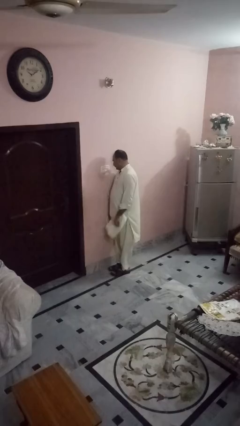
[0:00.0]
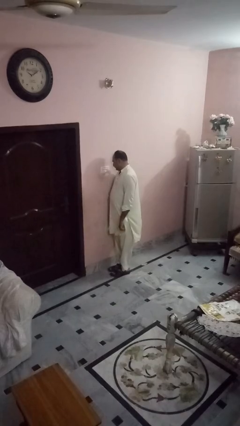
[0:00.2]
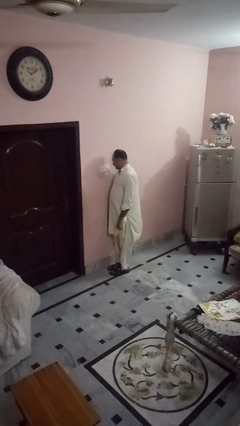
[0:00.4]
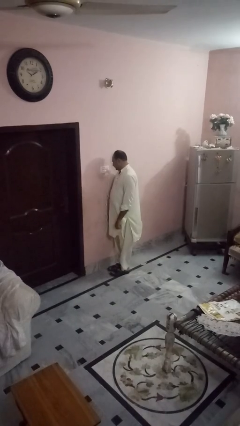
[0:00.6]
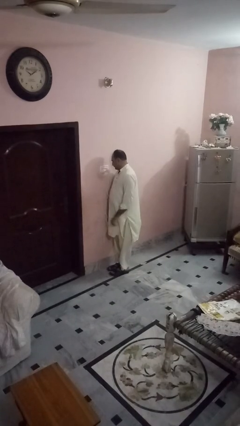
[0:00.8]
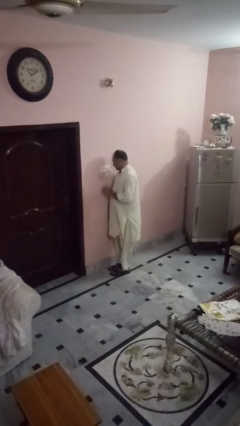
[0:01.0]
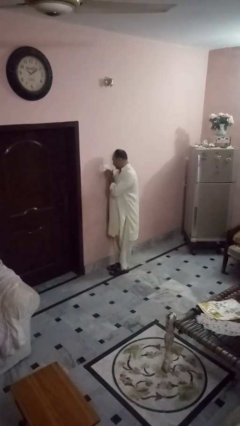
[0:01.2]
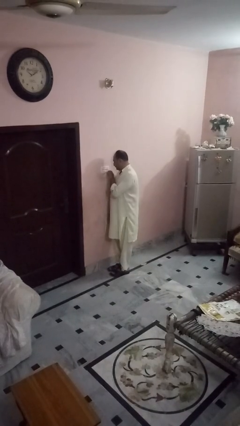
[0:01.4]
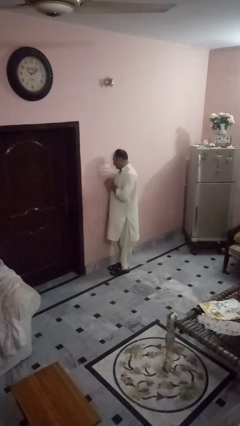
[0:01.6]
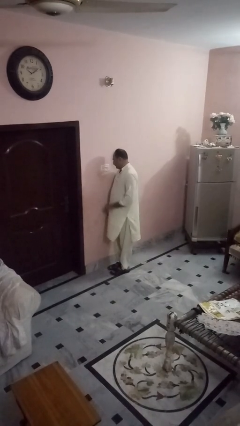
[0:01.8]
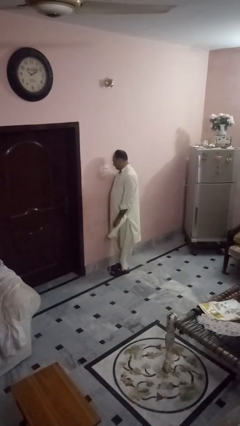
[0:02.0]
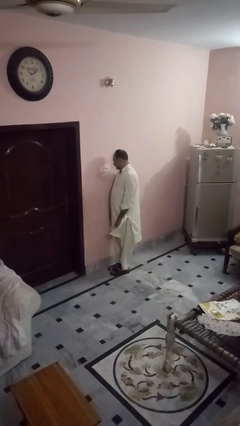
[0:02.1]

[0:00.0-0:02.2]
person unplugs from electrical socket

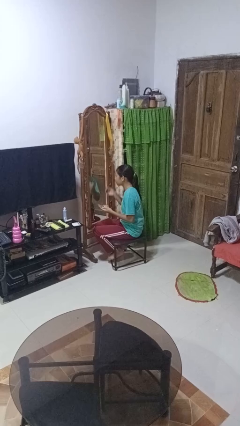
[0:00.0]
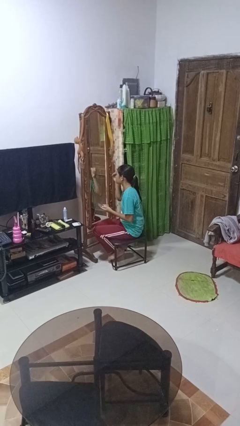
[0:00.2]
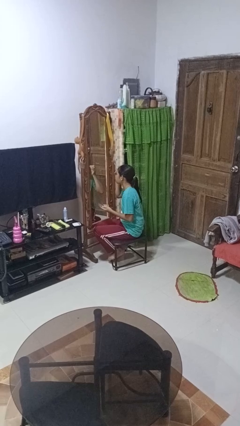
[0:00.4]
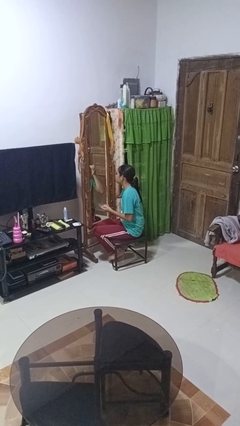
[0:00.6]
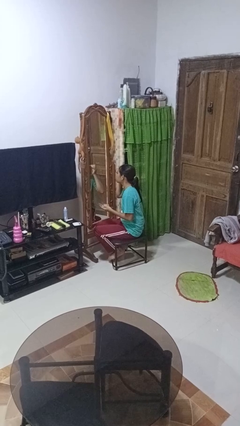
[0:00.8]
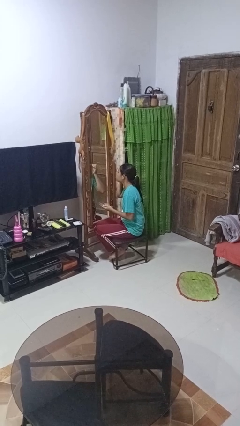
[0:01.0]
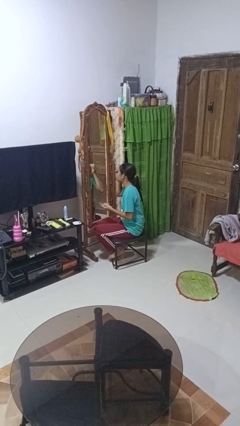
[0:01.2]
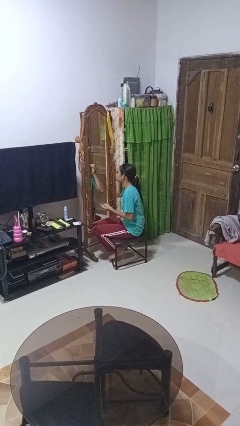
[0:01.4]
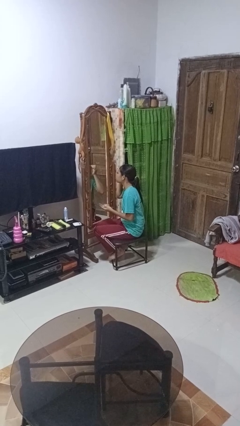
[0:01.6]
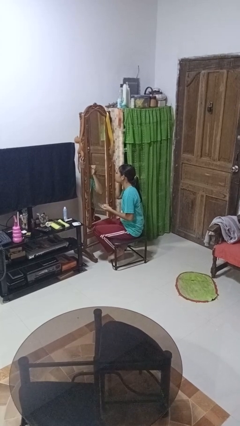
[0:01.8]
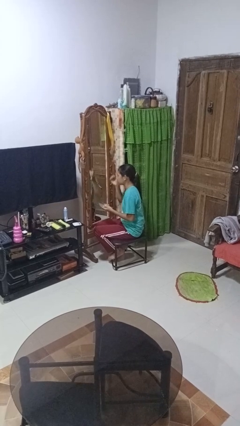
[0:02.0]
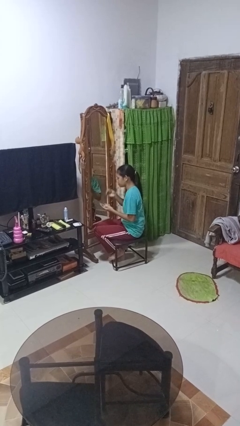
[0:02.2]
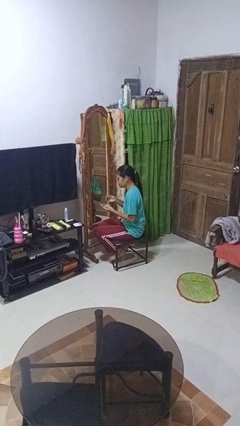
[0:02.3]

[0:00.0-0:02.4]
person applies eye makeup

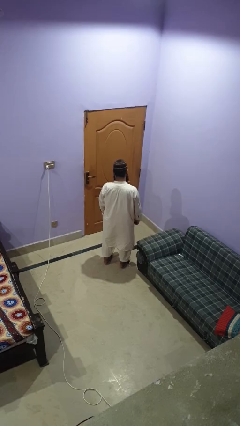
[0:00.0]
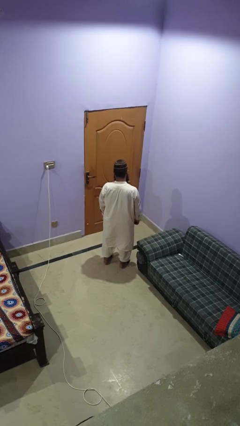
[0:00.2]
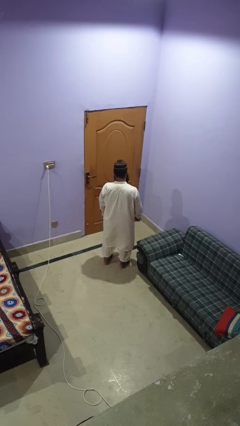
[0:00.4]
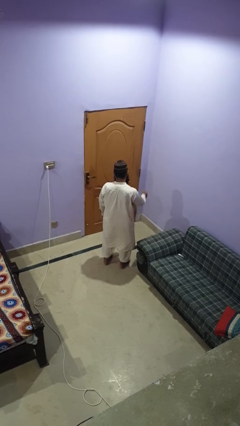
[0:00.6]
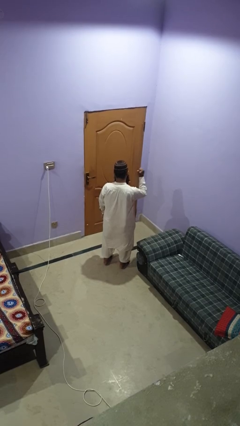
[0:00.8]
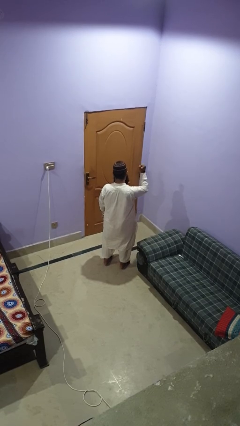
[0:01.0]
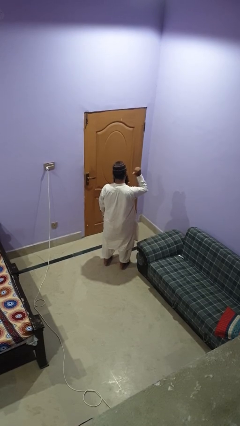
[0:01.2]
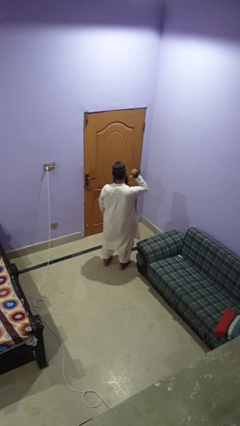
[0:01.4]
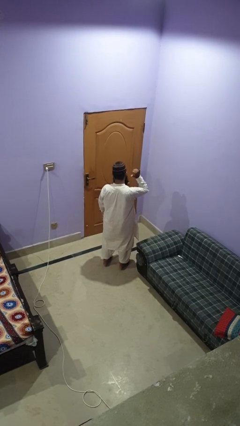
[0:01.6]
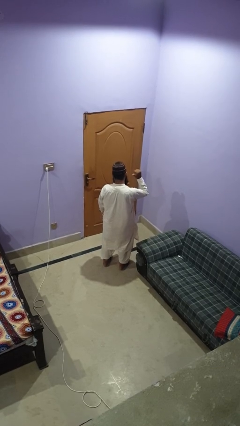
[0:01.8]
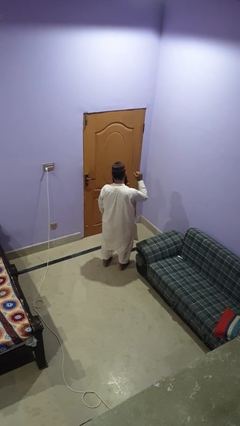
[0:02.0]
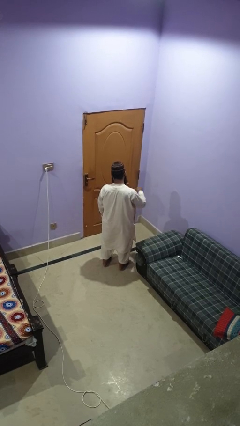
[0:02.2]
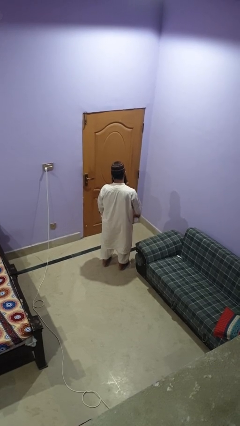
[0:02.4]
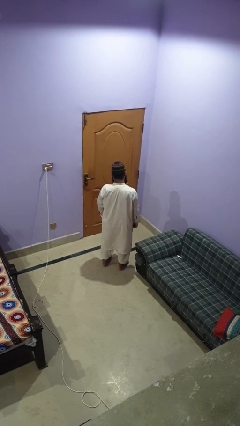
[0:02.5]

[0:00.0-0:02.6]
person gestures behind me

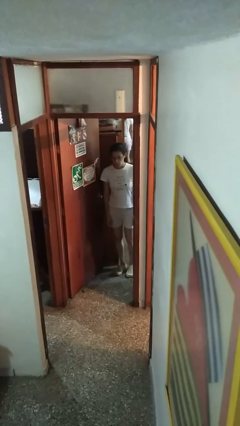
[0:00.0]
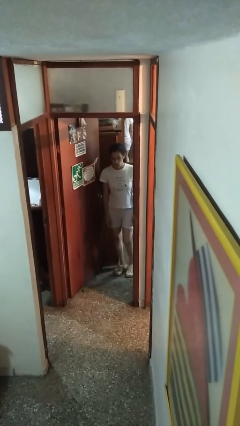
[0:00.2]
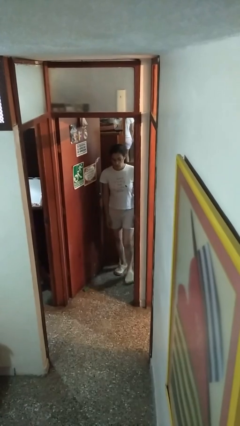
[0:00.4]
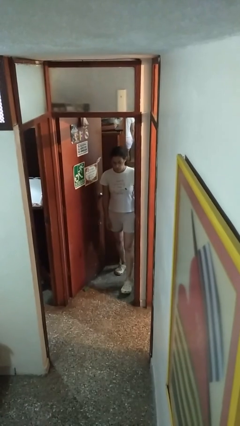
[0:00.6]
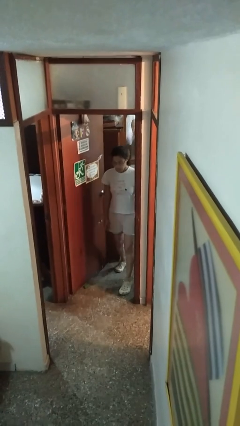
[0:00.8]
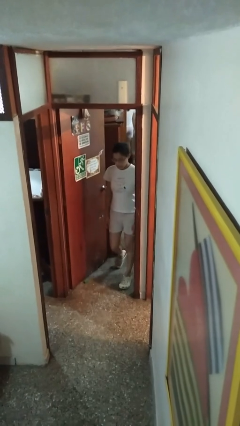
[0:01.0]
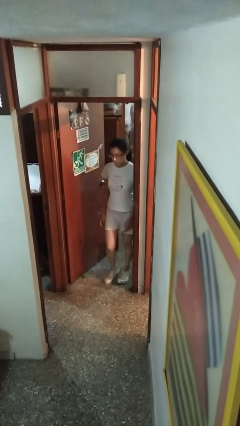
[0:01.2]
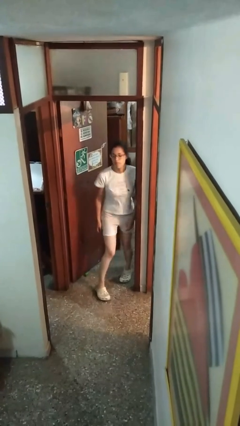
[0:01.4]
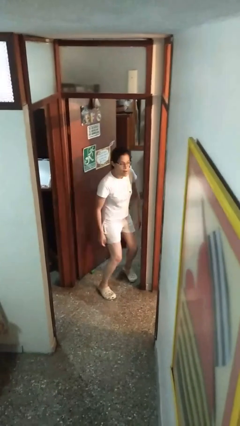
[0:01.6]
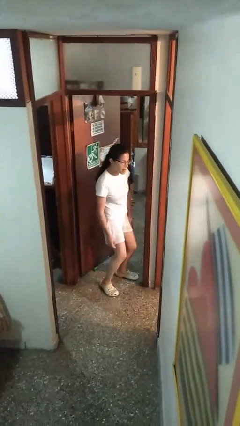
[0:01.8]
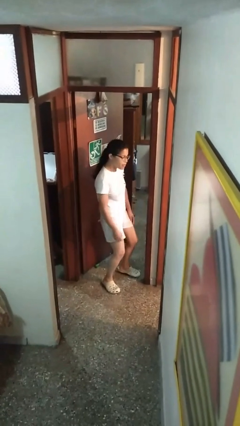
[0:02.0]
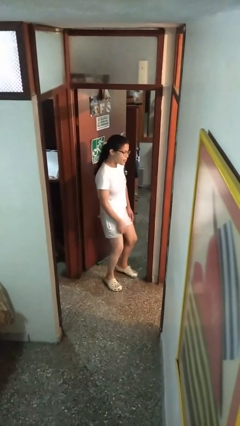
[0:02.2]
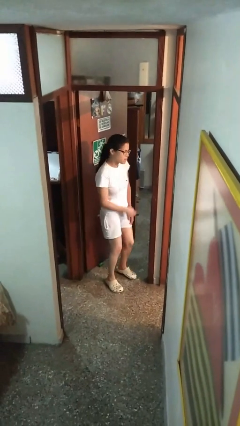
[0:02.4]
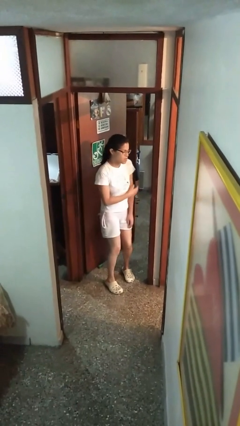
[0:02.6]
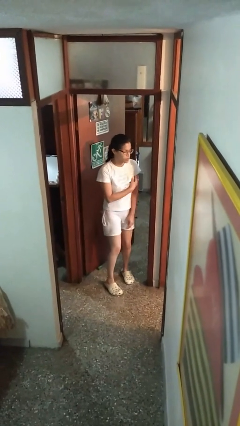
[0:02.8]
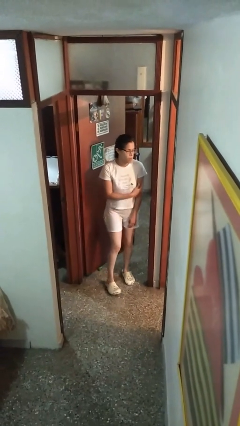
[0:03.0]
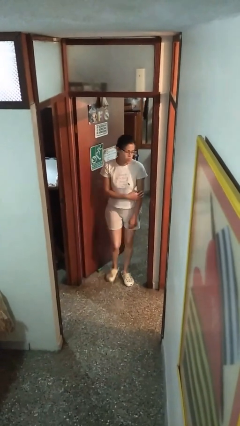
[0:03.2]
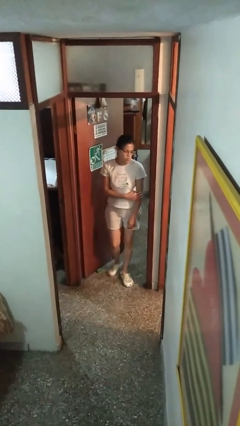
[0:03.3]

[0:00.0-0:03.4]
person bumps into wall

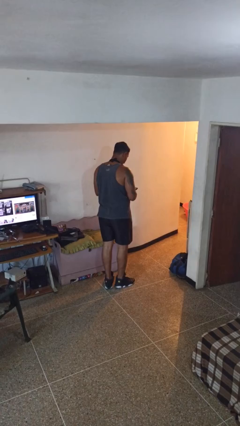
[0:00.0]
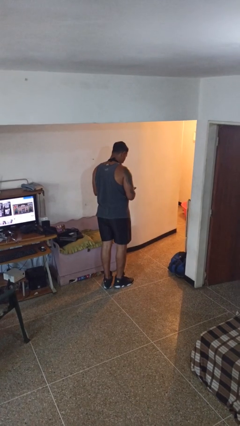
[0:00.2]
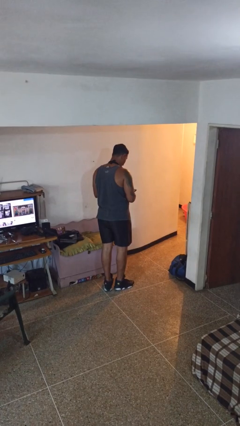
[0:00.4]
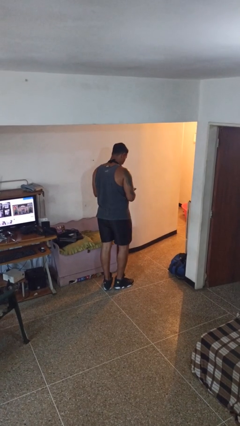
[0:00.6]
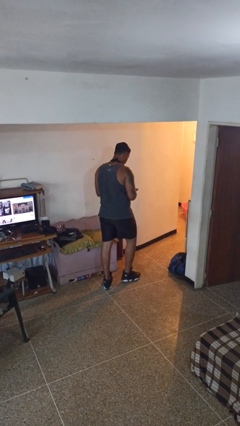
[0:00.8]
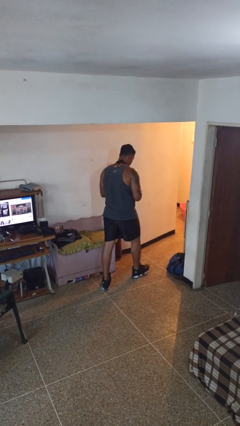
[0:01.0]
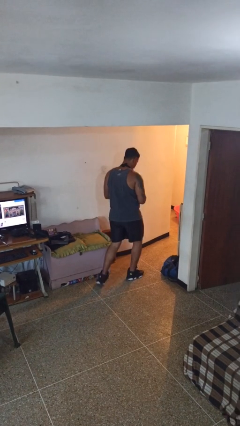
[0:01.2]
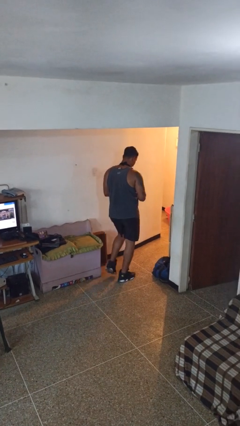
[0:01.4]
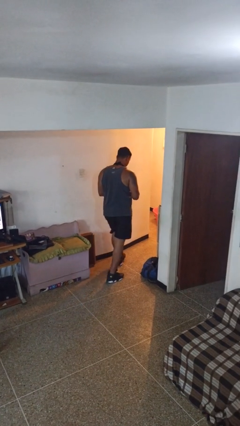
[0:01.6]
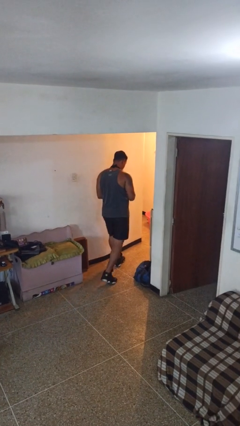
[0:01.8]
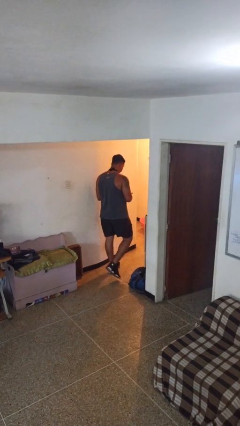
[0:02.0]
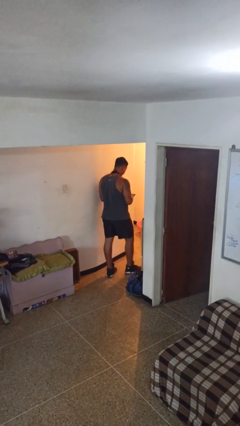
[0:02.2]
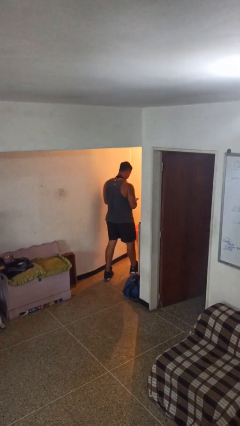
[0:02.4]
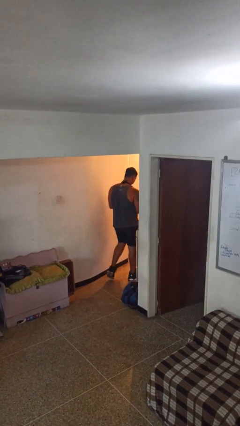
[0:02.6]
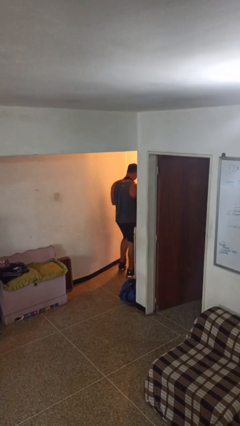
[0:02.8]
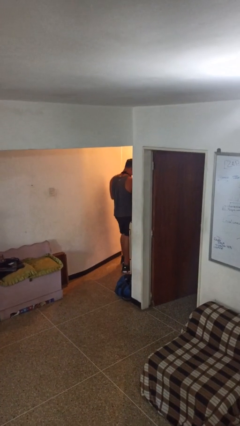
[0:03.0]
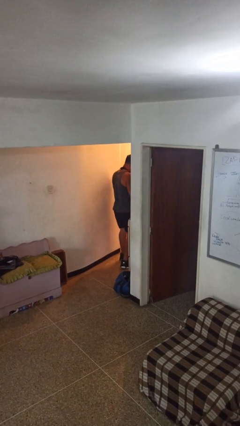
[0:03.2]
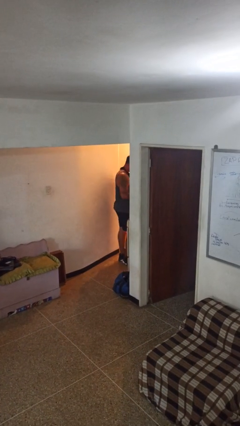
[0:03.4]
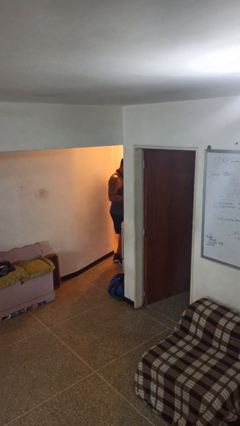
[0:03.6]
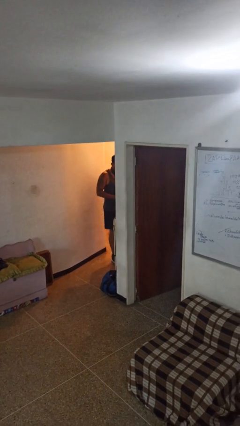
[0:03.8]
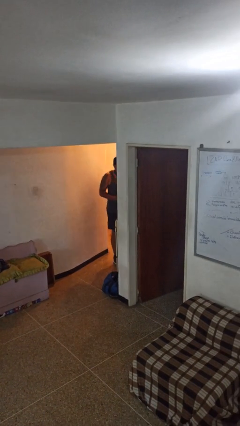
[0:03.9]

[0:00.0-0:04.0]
person exits scene through structure

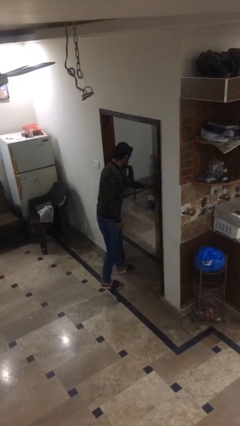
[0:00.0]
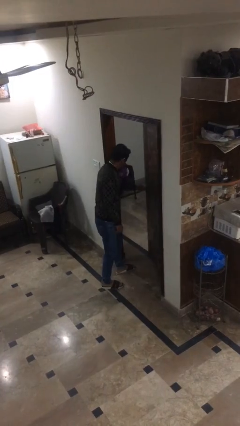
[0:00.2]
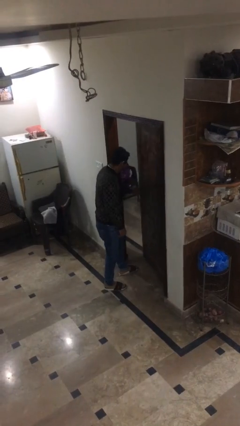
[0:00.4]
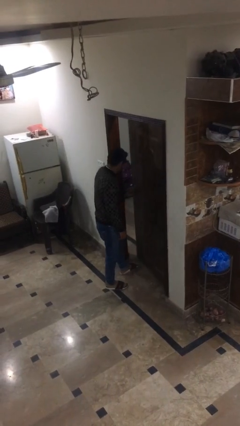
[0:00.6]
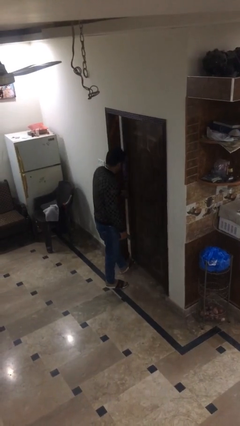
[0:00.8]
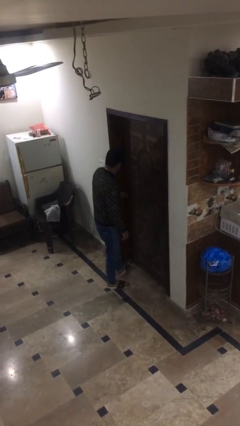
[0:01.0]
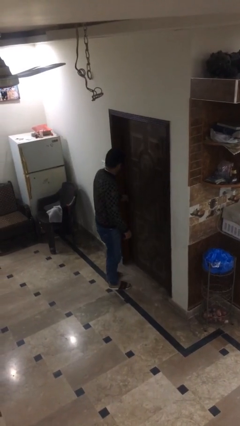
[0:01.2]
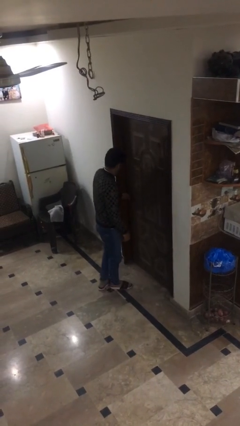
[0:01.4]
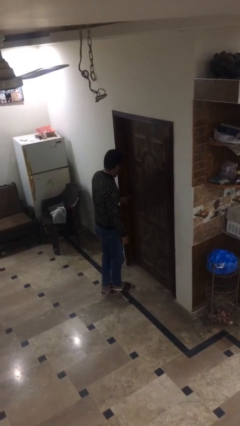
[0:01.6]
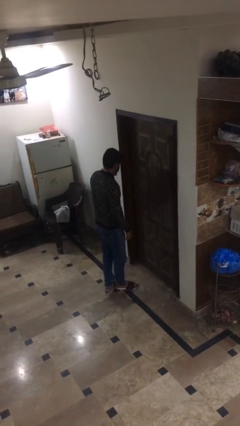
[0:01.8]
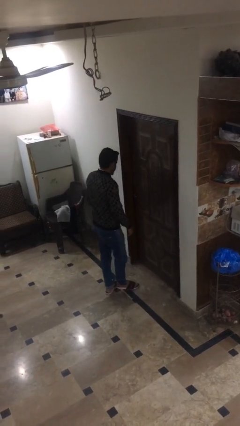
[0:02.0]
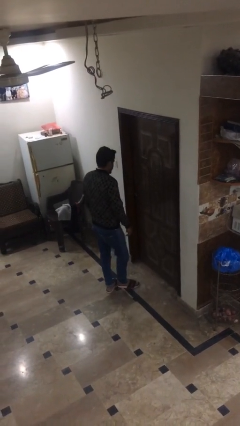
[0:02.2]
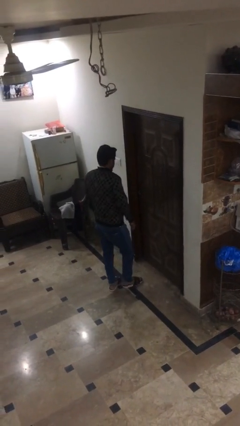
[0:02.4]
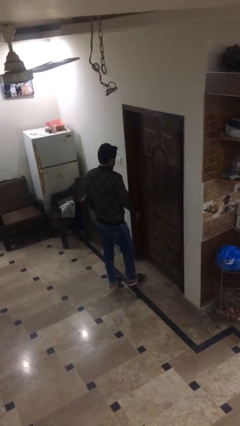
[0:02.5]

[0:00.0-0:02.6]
person closes facility door

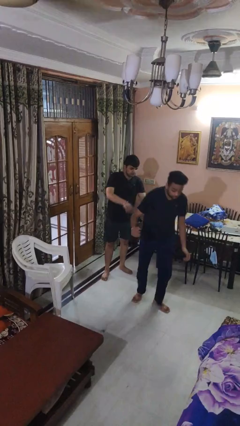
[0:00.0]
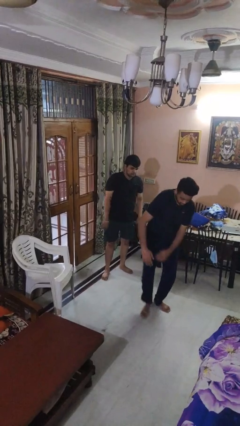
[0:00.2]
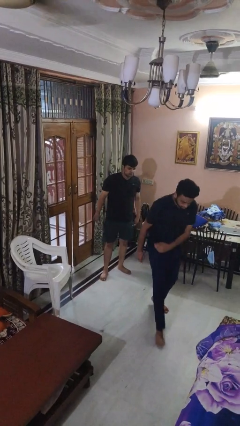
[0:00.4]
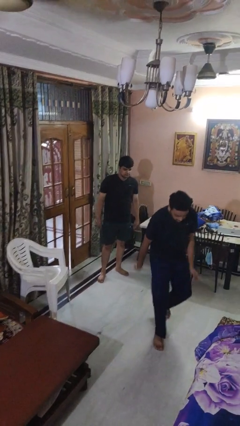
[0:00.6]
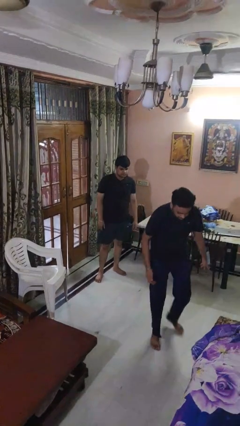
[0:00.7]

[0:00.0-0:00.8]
person shoves person
